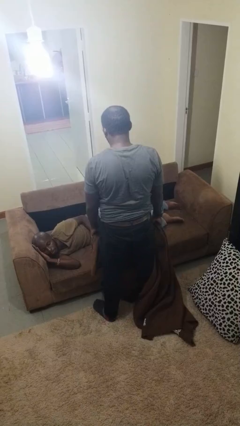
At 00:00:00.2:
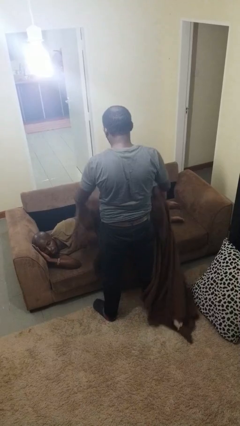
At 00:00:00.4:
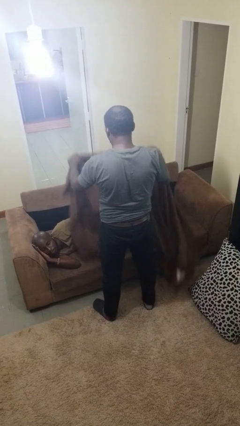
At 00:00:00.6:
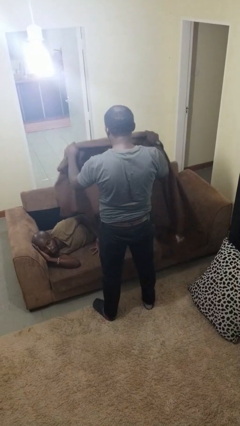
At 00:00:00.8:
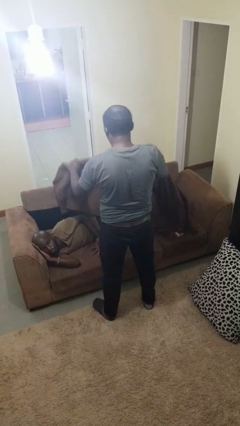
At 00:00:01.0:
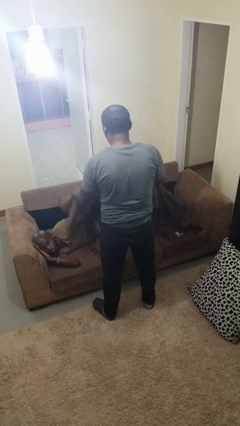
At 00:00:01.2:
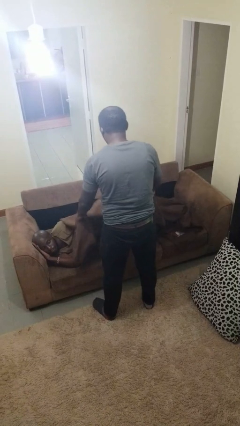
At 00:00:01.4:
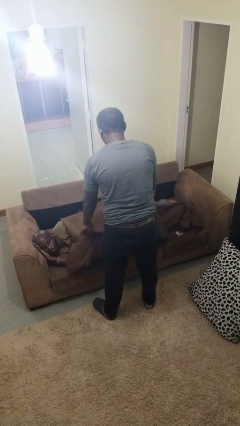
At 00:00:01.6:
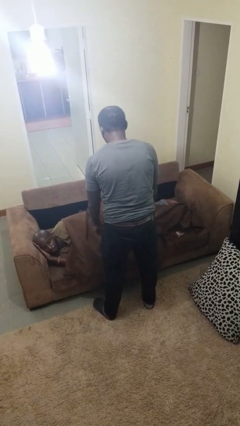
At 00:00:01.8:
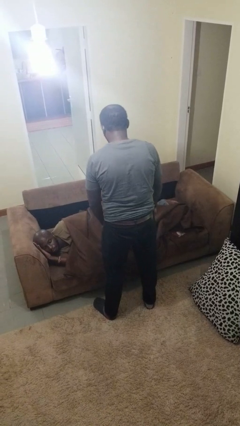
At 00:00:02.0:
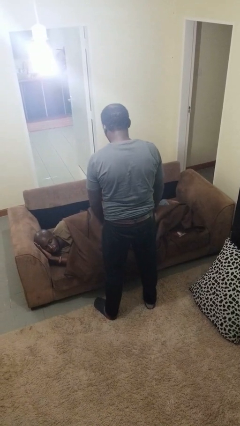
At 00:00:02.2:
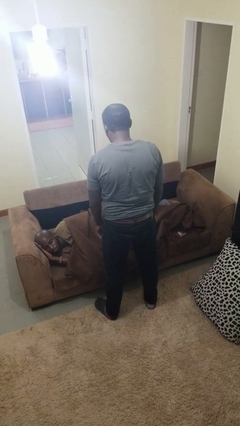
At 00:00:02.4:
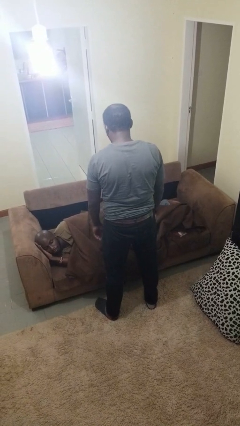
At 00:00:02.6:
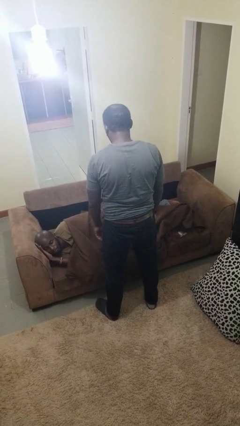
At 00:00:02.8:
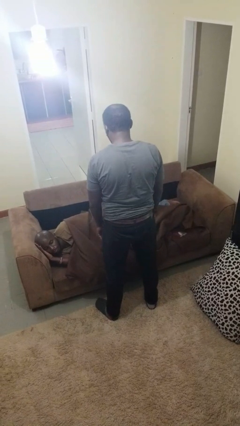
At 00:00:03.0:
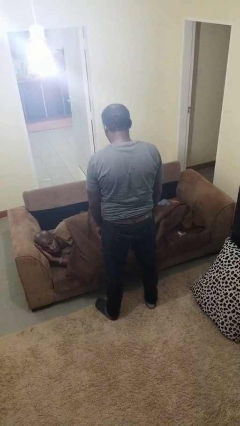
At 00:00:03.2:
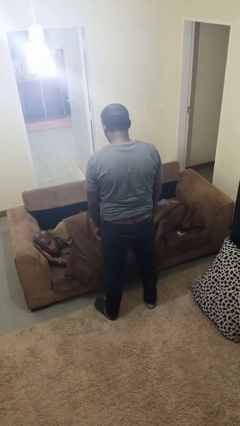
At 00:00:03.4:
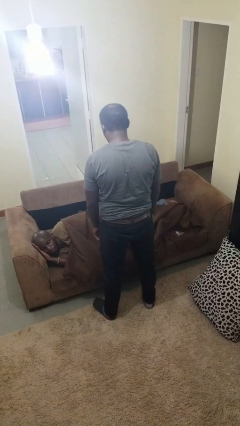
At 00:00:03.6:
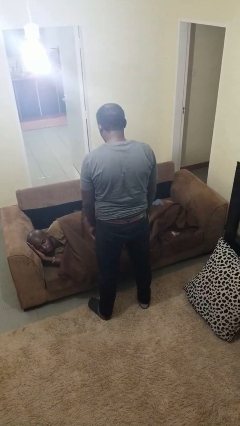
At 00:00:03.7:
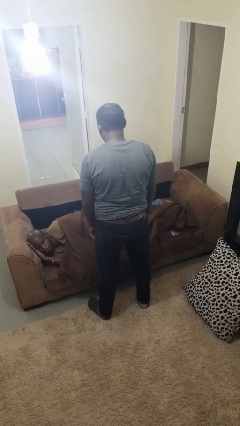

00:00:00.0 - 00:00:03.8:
person covers friend with blanket

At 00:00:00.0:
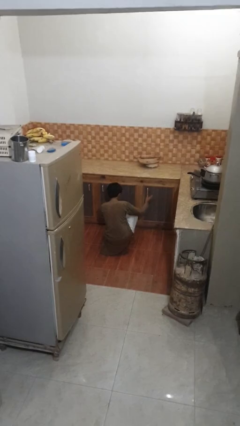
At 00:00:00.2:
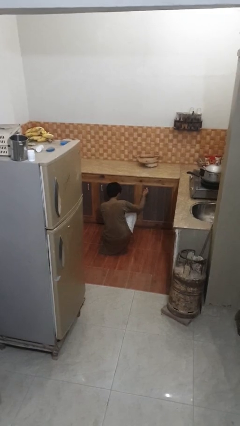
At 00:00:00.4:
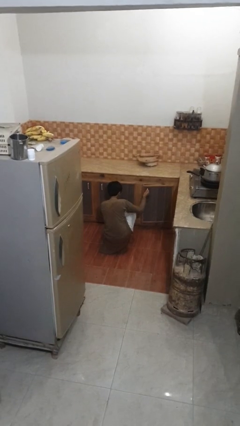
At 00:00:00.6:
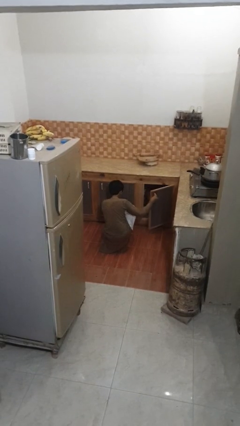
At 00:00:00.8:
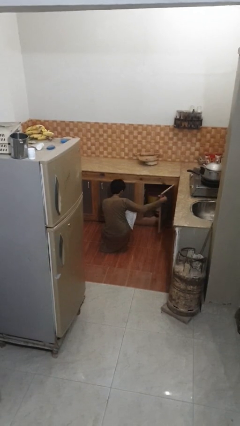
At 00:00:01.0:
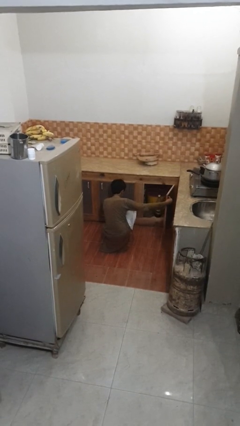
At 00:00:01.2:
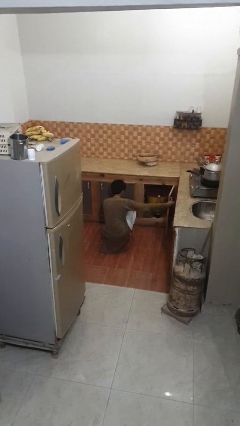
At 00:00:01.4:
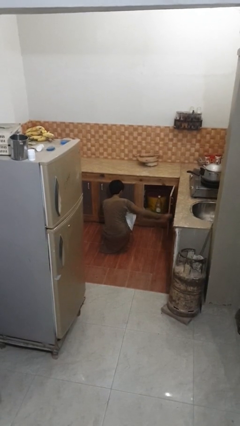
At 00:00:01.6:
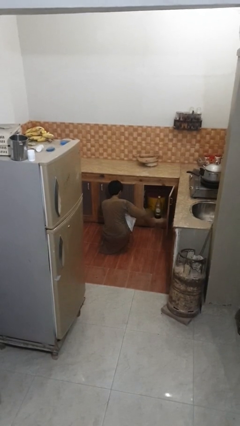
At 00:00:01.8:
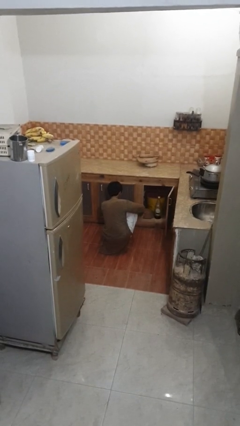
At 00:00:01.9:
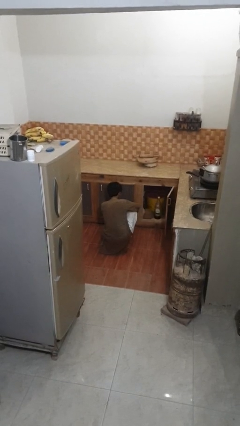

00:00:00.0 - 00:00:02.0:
person opens kitchen drawer

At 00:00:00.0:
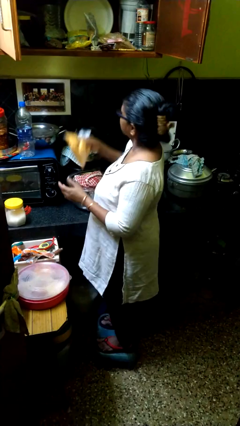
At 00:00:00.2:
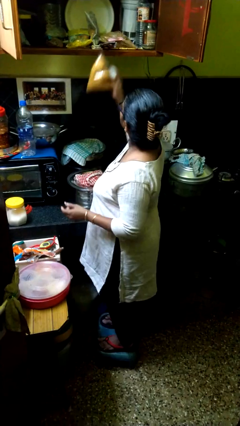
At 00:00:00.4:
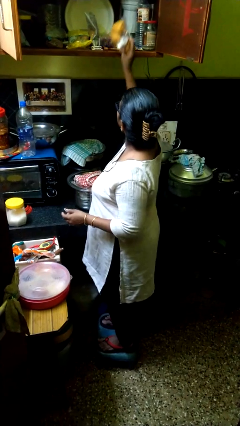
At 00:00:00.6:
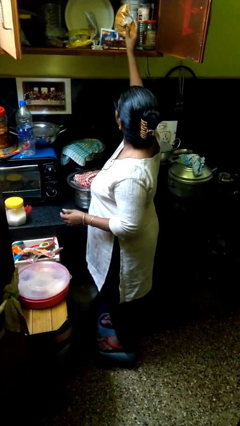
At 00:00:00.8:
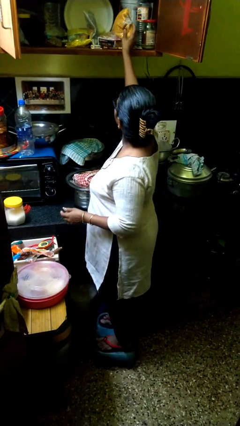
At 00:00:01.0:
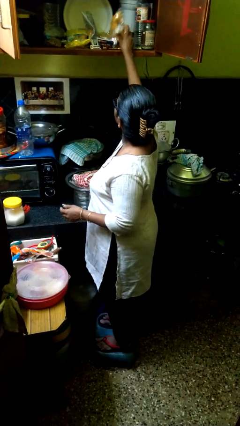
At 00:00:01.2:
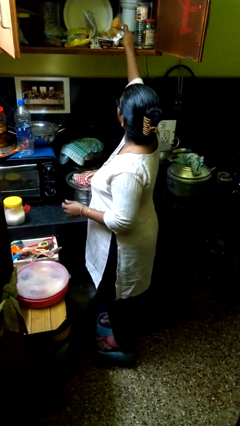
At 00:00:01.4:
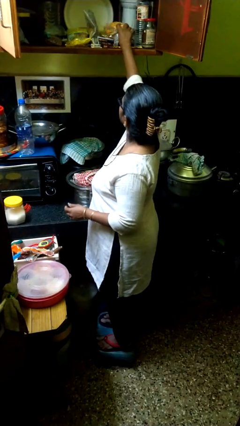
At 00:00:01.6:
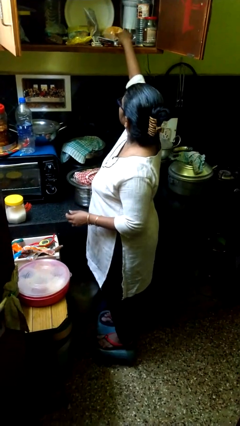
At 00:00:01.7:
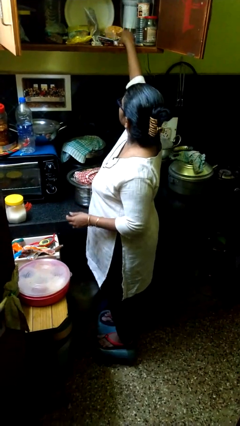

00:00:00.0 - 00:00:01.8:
person puts object in cabinet

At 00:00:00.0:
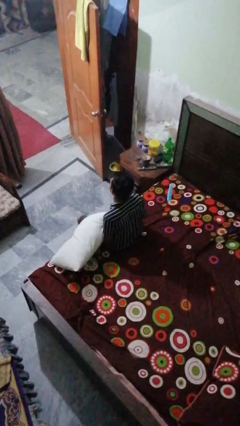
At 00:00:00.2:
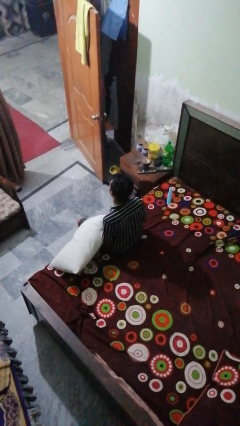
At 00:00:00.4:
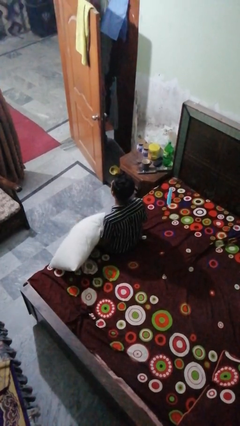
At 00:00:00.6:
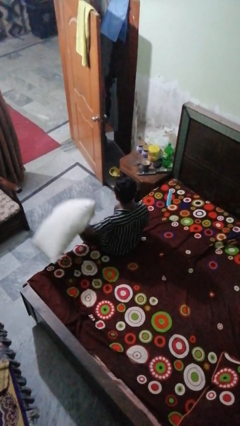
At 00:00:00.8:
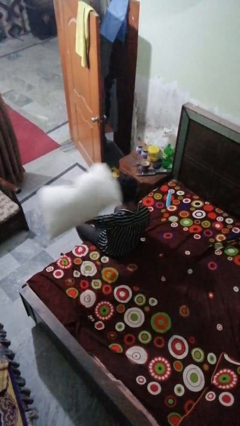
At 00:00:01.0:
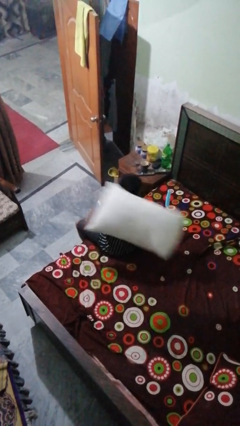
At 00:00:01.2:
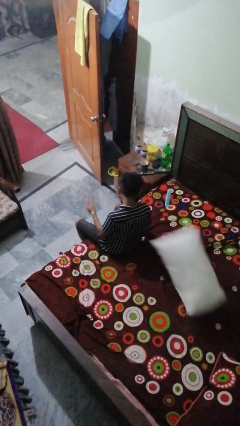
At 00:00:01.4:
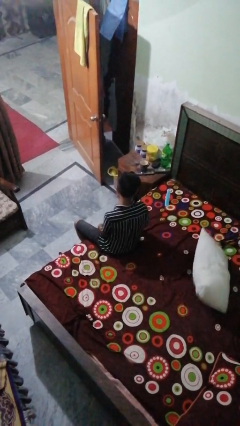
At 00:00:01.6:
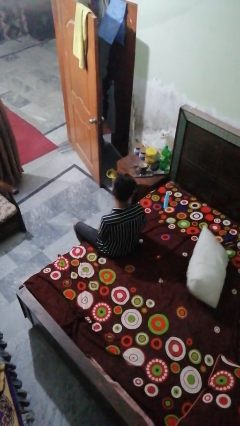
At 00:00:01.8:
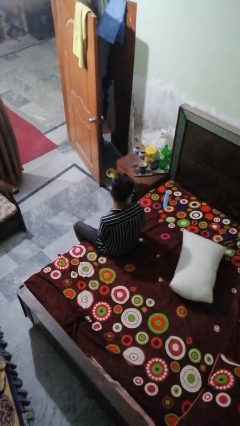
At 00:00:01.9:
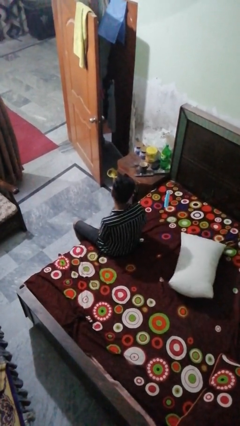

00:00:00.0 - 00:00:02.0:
person throws object on bed

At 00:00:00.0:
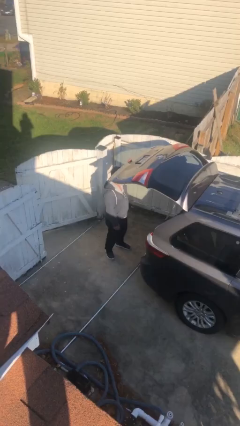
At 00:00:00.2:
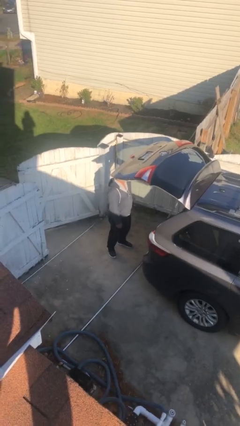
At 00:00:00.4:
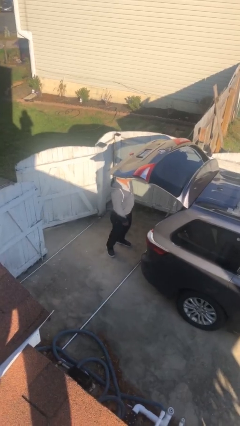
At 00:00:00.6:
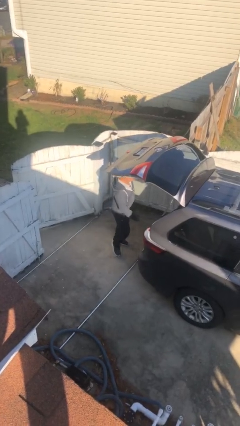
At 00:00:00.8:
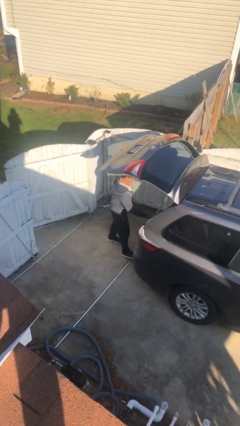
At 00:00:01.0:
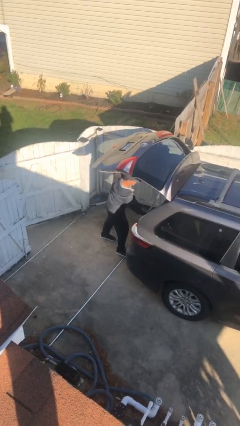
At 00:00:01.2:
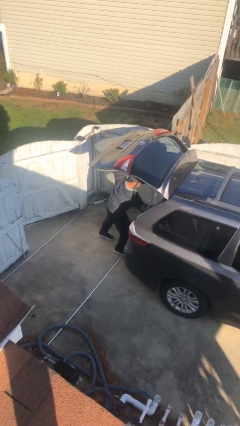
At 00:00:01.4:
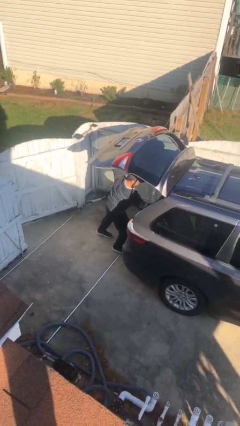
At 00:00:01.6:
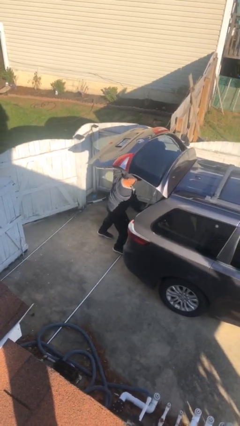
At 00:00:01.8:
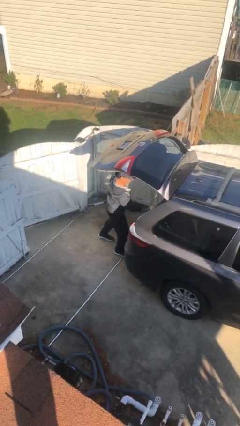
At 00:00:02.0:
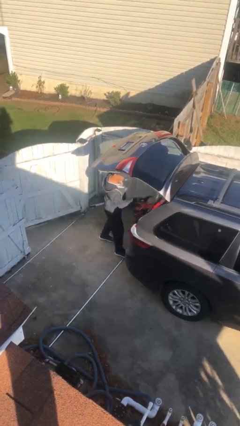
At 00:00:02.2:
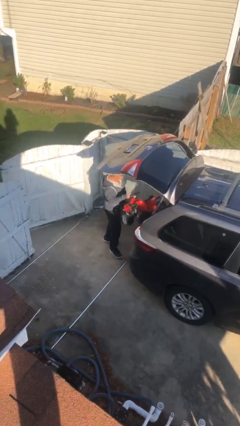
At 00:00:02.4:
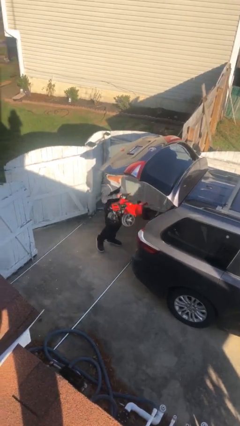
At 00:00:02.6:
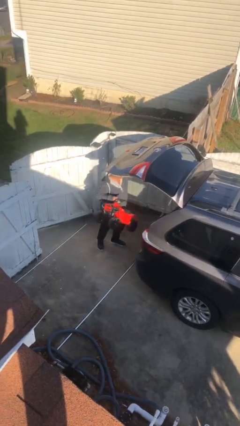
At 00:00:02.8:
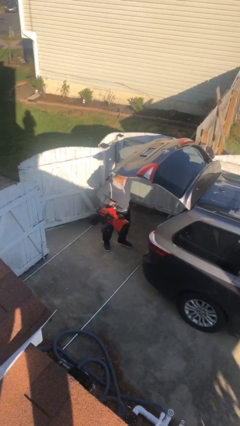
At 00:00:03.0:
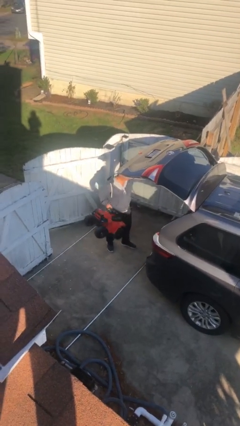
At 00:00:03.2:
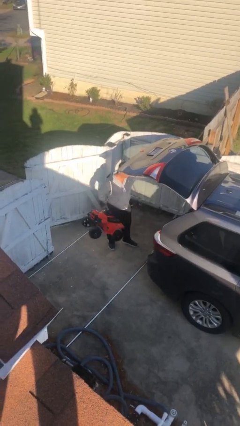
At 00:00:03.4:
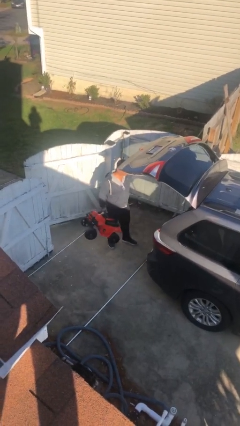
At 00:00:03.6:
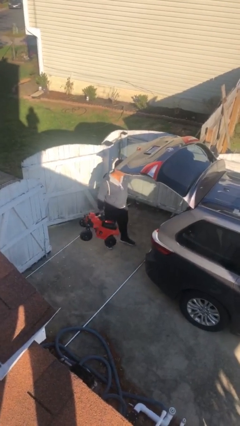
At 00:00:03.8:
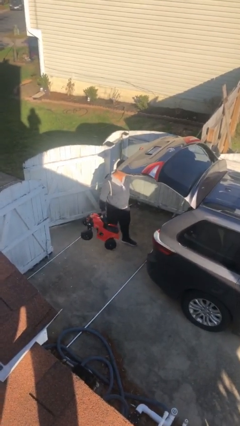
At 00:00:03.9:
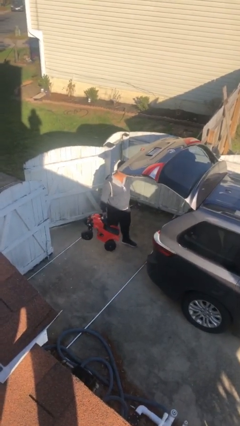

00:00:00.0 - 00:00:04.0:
person unloads car

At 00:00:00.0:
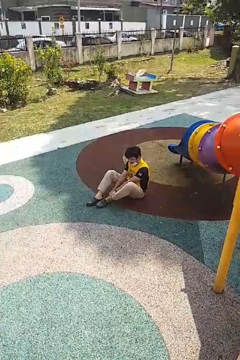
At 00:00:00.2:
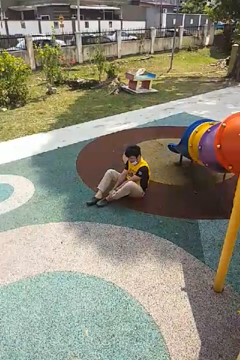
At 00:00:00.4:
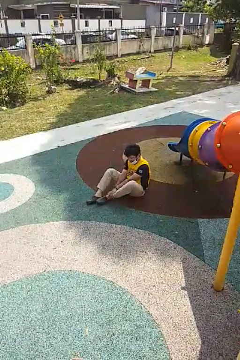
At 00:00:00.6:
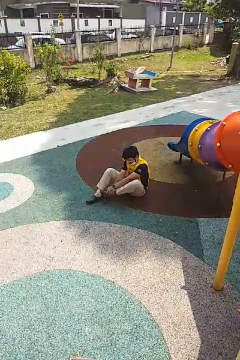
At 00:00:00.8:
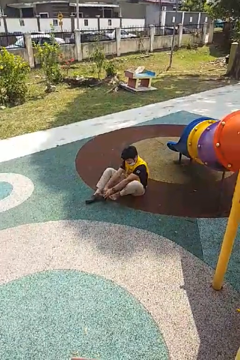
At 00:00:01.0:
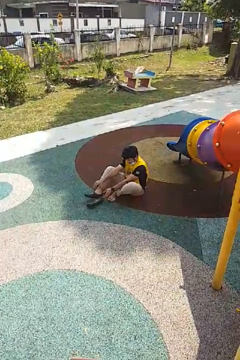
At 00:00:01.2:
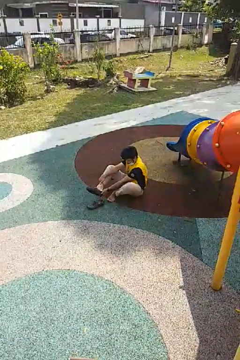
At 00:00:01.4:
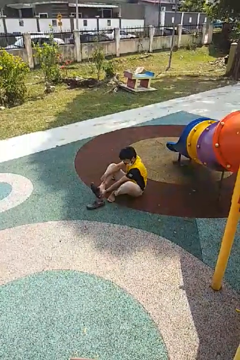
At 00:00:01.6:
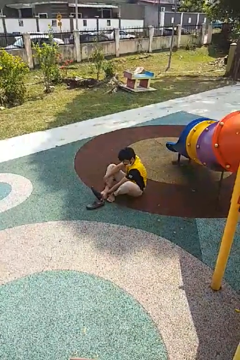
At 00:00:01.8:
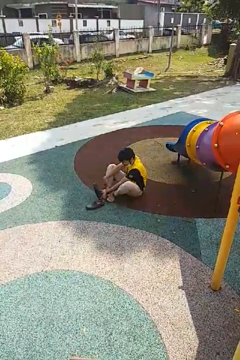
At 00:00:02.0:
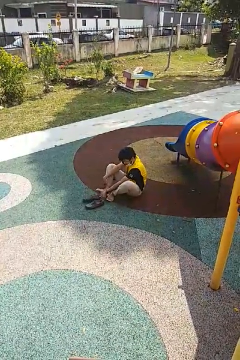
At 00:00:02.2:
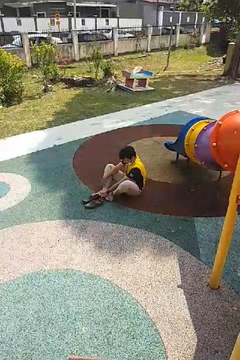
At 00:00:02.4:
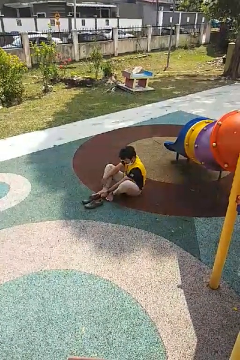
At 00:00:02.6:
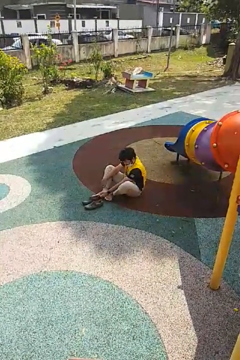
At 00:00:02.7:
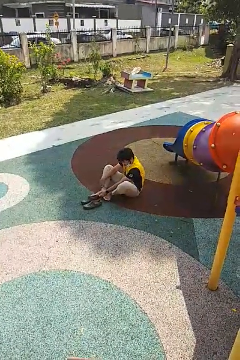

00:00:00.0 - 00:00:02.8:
person takes off shoes

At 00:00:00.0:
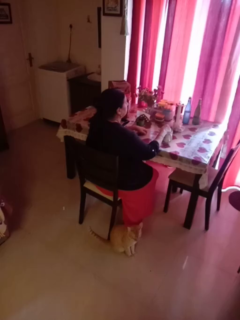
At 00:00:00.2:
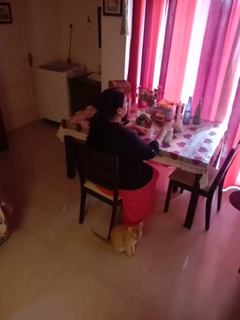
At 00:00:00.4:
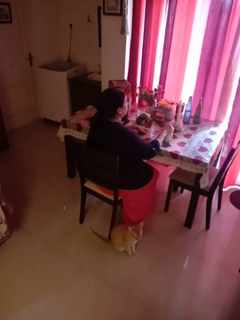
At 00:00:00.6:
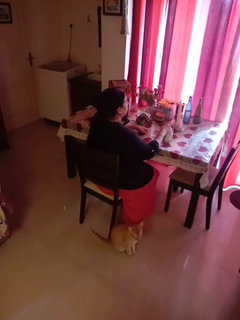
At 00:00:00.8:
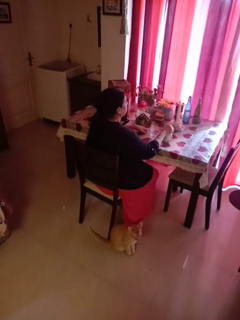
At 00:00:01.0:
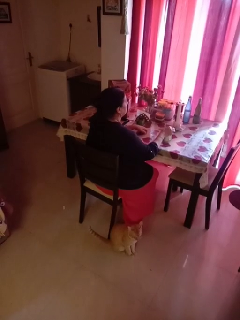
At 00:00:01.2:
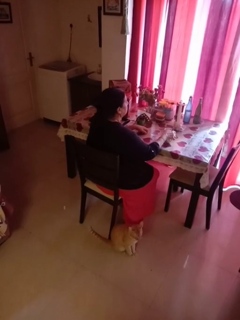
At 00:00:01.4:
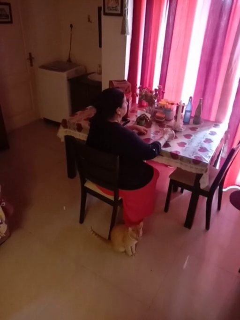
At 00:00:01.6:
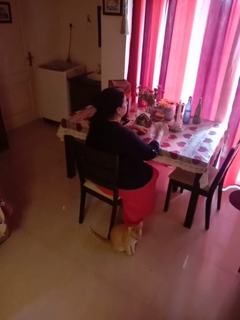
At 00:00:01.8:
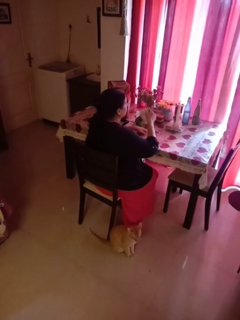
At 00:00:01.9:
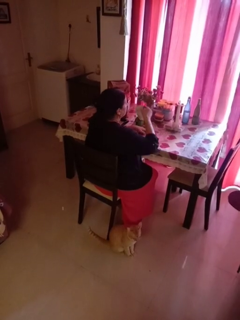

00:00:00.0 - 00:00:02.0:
person stirs mug
